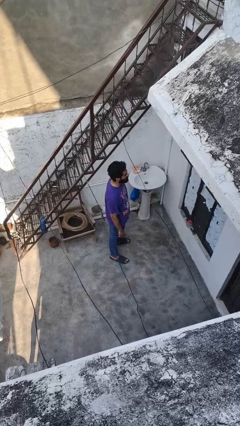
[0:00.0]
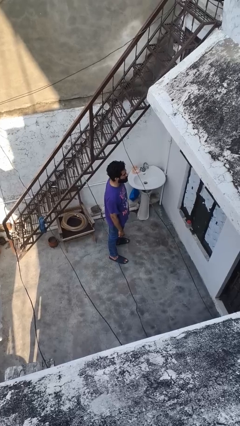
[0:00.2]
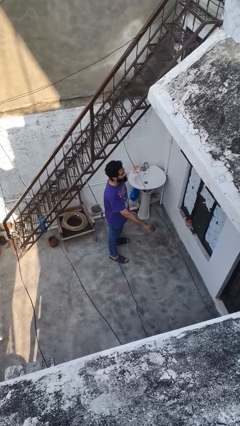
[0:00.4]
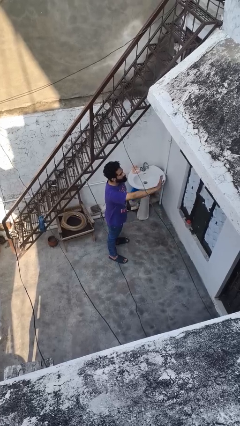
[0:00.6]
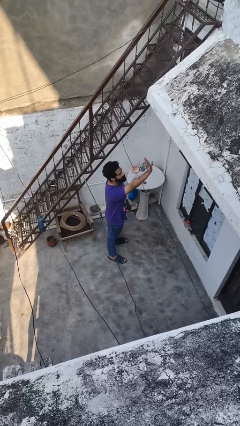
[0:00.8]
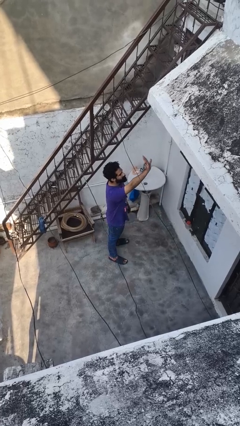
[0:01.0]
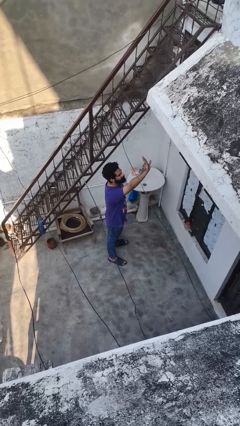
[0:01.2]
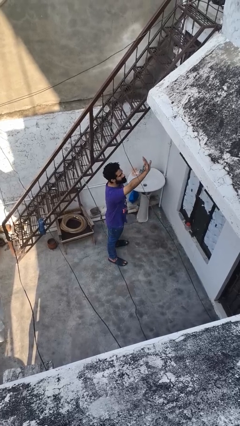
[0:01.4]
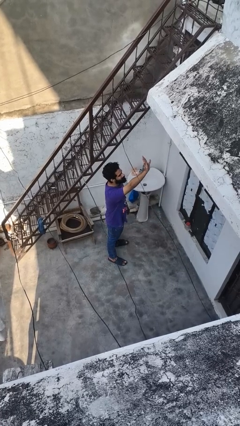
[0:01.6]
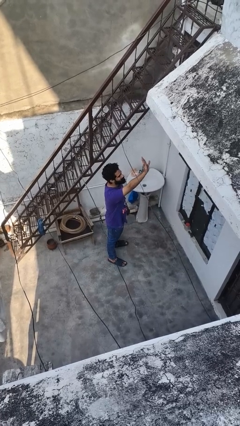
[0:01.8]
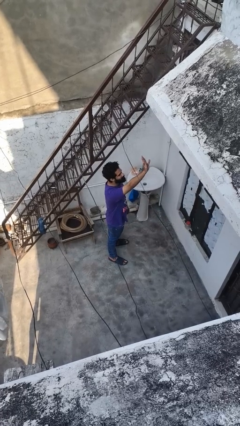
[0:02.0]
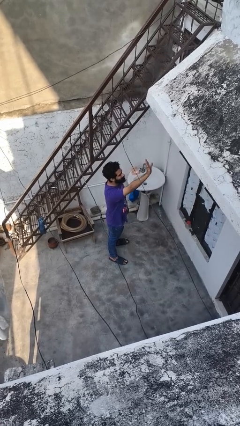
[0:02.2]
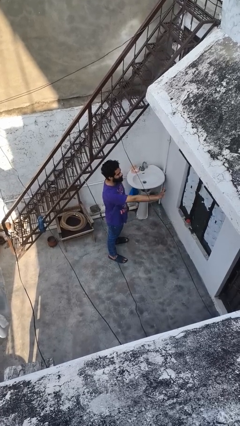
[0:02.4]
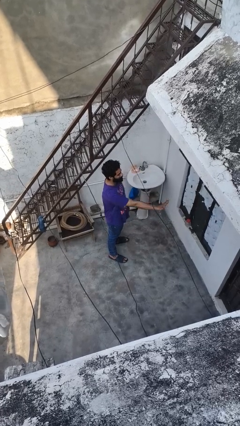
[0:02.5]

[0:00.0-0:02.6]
person gestures raise hand

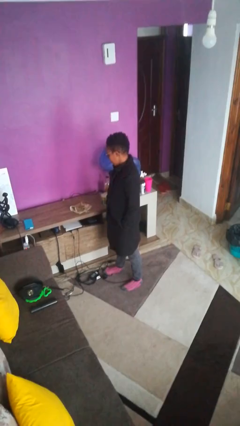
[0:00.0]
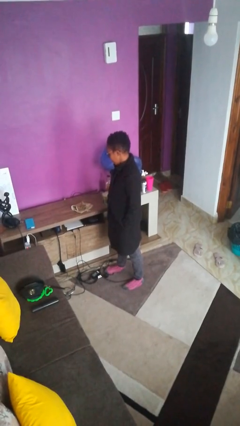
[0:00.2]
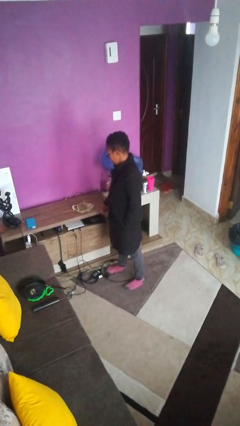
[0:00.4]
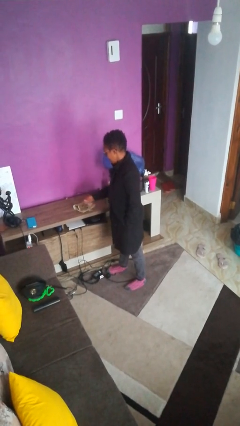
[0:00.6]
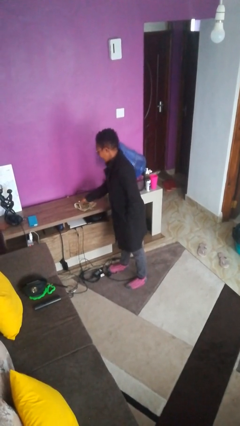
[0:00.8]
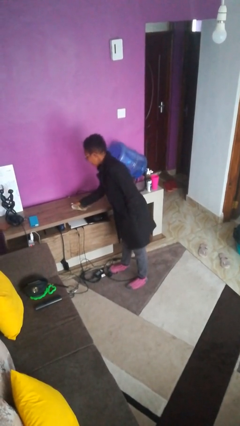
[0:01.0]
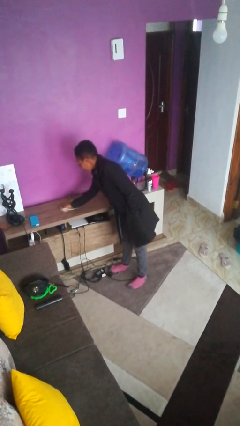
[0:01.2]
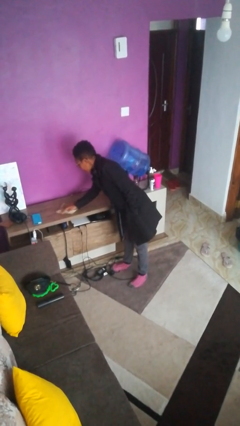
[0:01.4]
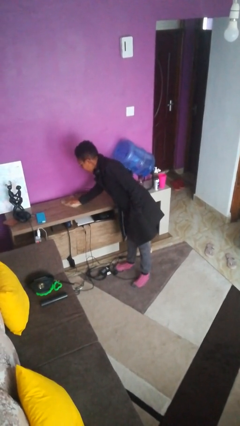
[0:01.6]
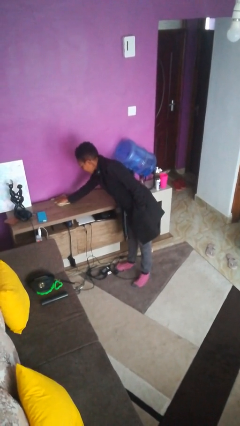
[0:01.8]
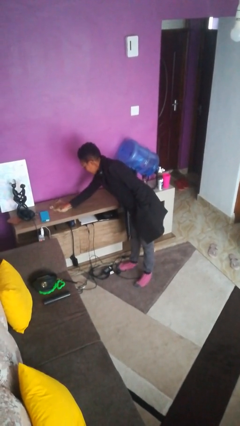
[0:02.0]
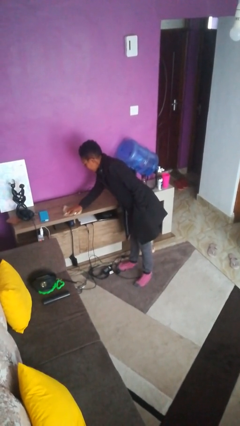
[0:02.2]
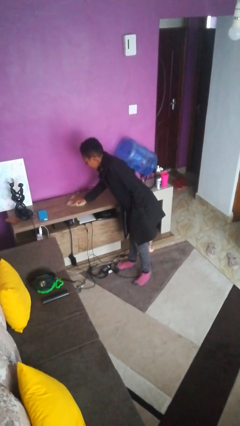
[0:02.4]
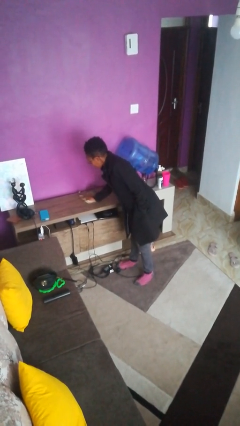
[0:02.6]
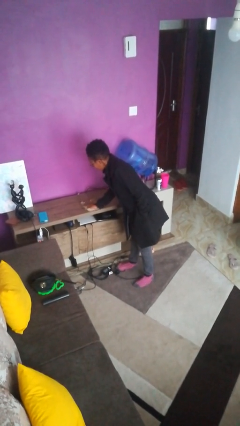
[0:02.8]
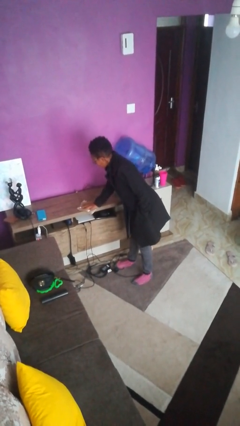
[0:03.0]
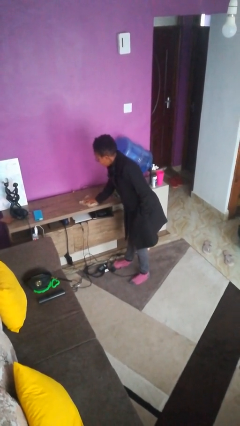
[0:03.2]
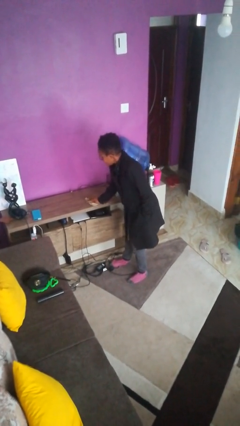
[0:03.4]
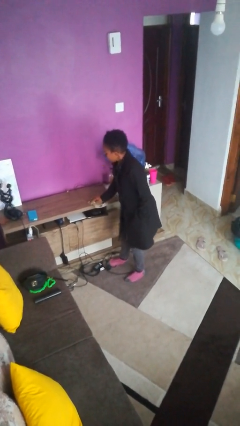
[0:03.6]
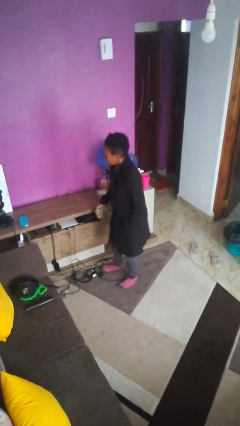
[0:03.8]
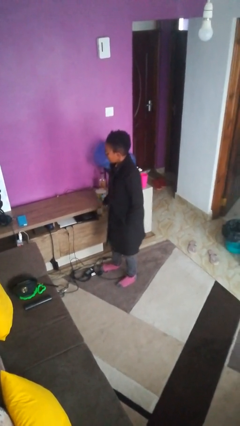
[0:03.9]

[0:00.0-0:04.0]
person cleans table with rag

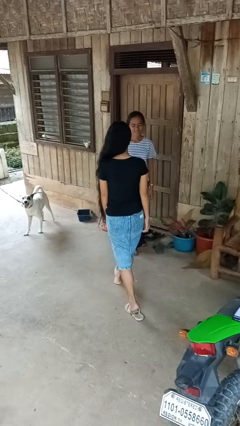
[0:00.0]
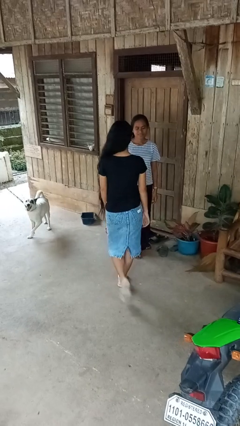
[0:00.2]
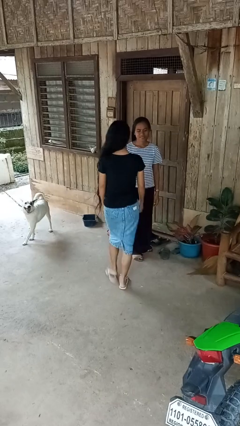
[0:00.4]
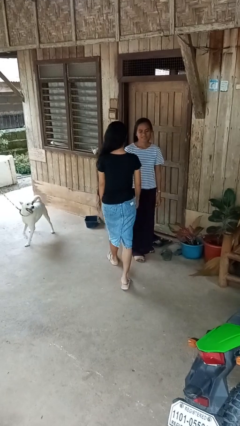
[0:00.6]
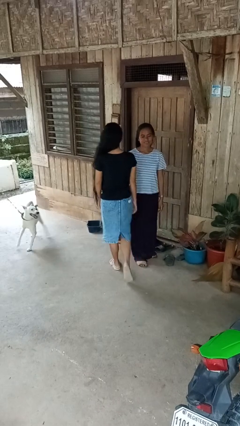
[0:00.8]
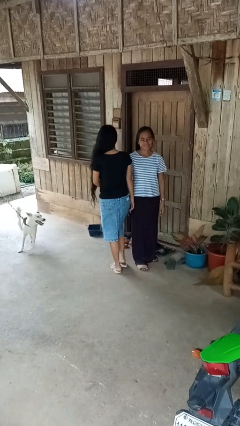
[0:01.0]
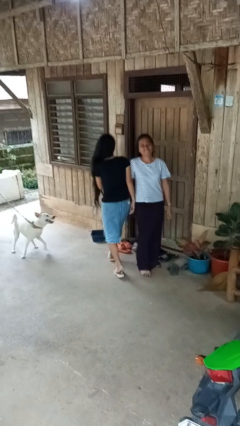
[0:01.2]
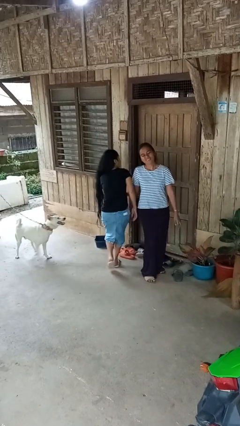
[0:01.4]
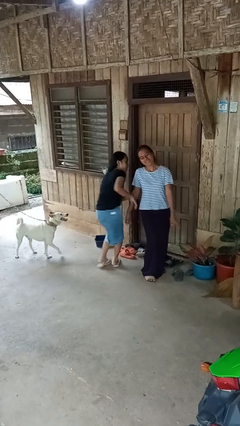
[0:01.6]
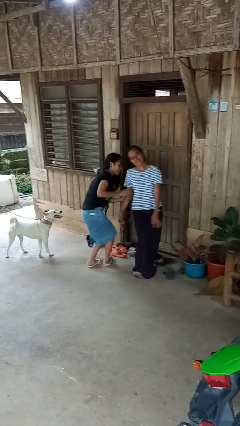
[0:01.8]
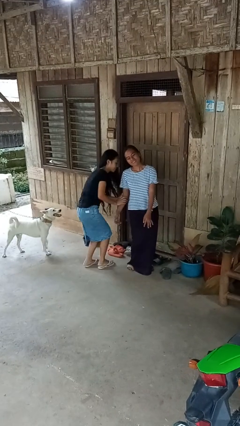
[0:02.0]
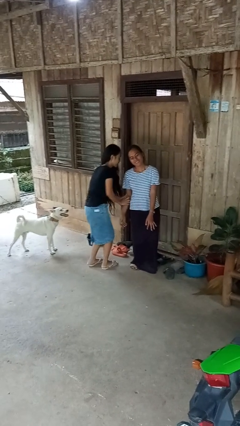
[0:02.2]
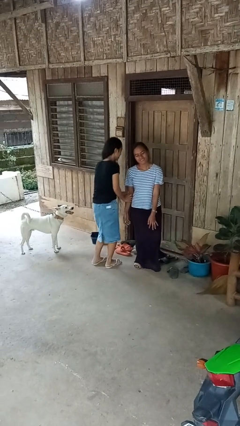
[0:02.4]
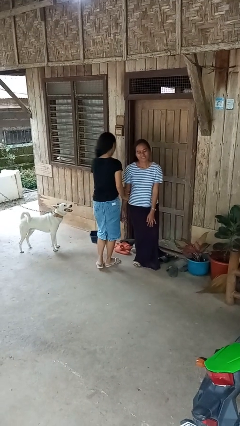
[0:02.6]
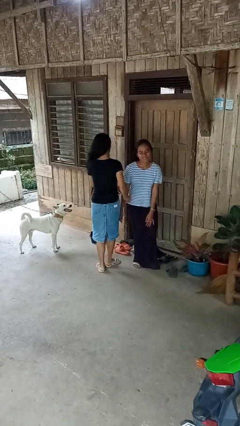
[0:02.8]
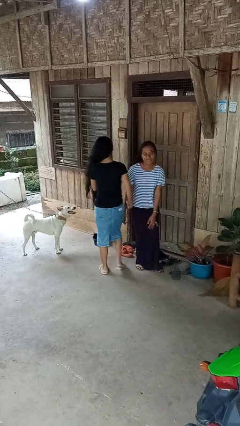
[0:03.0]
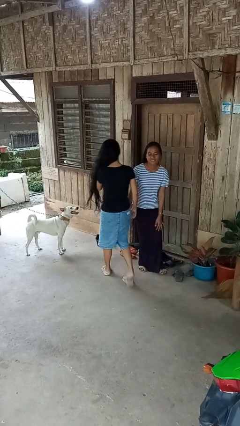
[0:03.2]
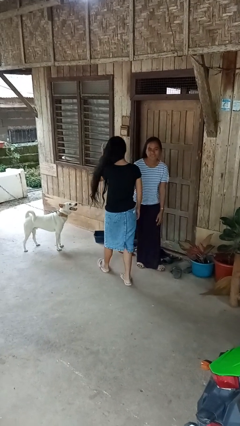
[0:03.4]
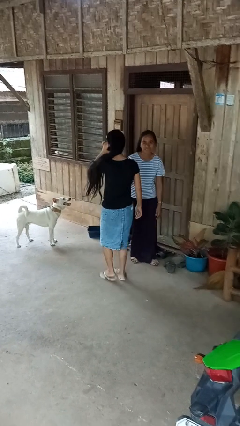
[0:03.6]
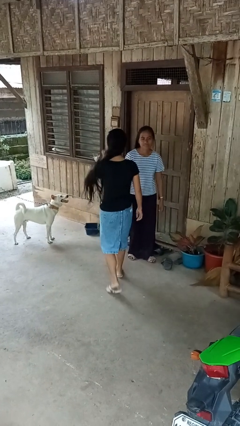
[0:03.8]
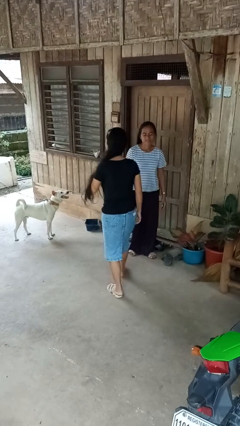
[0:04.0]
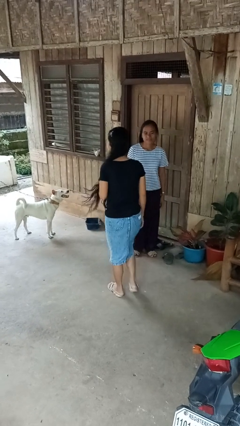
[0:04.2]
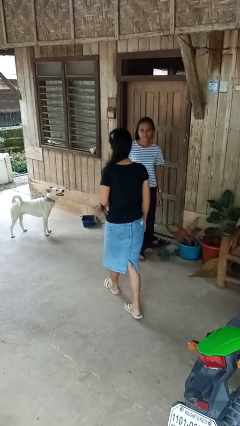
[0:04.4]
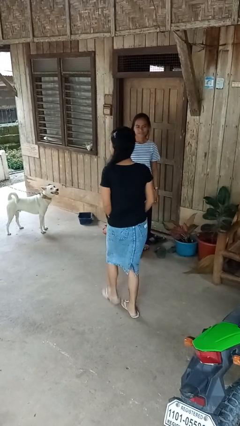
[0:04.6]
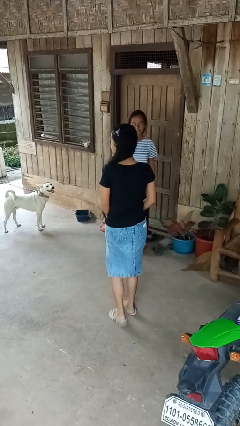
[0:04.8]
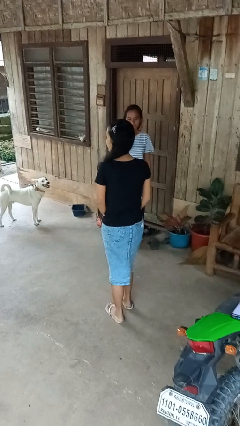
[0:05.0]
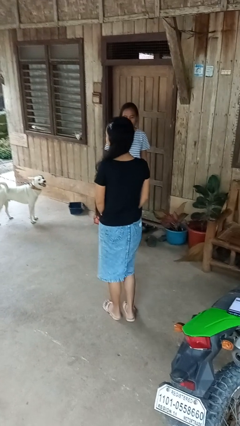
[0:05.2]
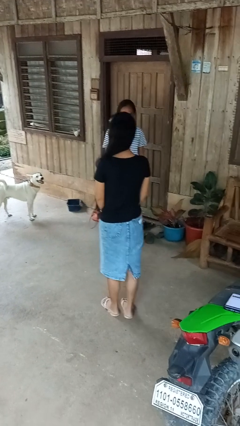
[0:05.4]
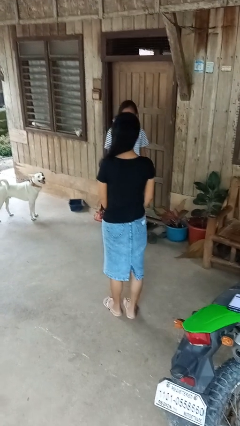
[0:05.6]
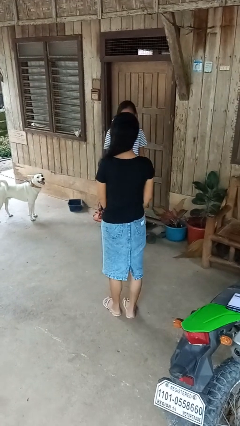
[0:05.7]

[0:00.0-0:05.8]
person bumps into person

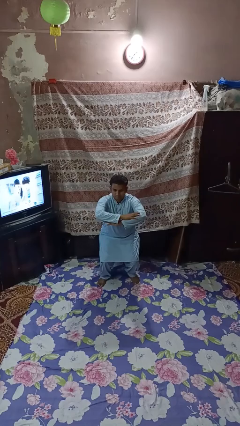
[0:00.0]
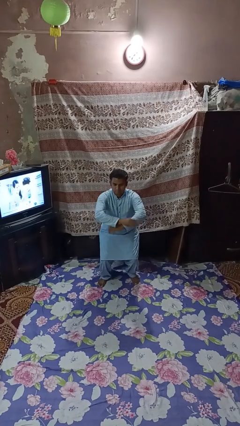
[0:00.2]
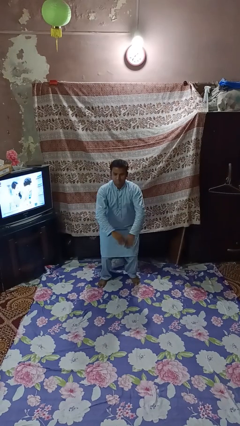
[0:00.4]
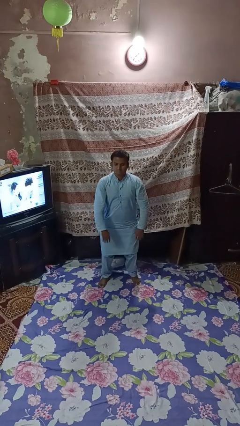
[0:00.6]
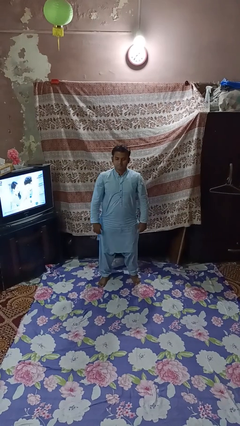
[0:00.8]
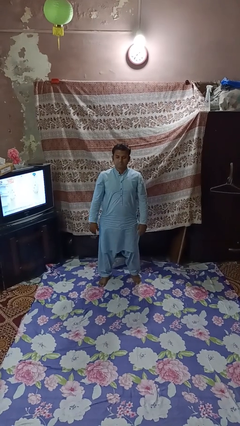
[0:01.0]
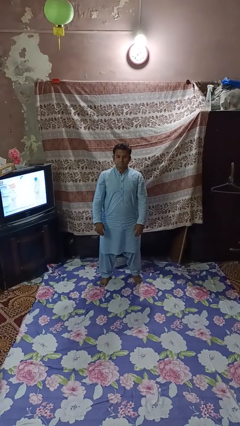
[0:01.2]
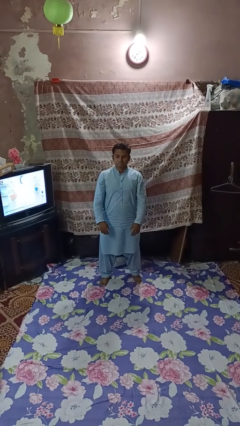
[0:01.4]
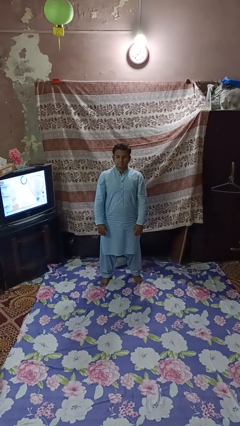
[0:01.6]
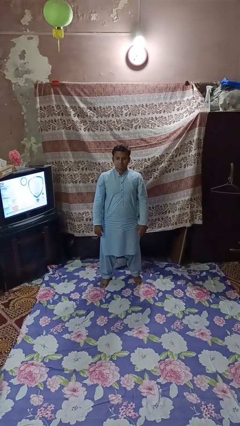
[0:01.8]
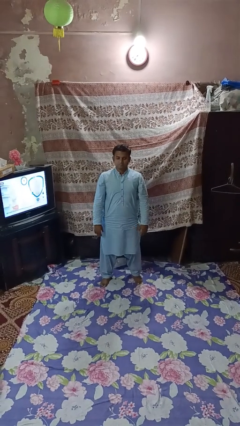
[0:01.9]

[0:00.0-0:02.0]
person stands up

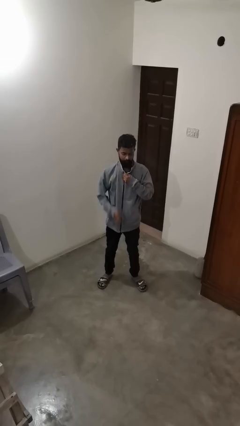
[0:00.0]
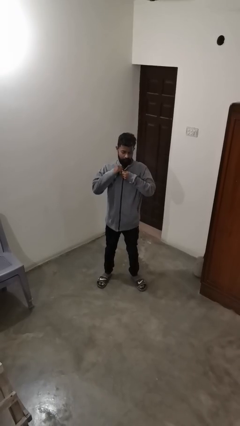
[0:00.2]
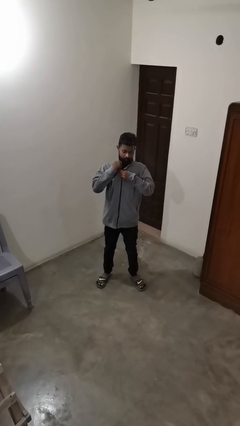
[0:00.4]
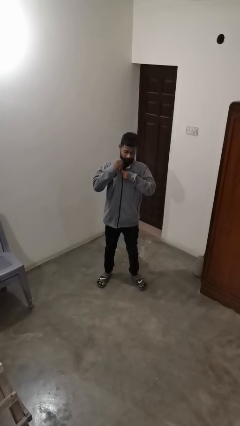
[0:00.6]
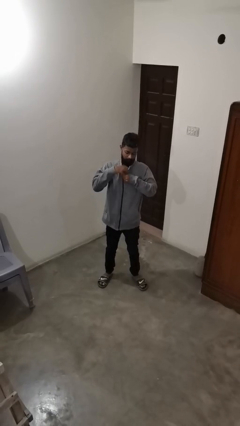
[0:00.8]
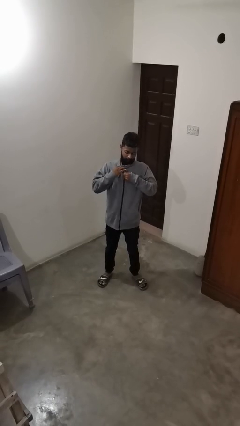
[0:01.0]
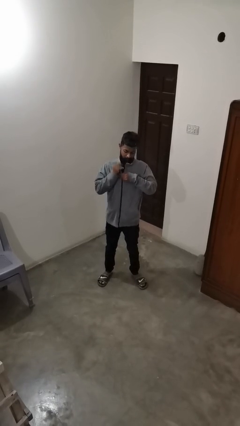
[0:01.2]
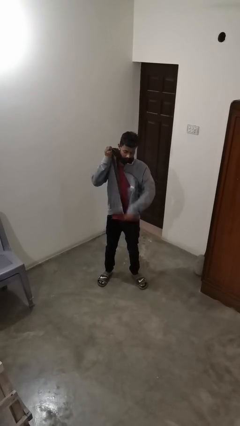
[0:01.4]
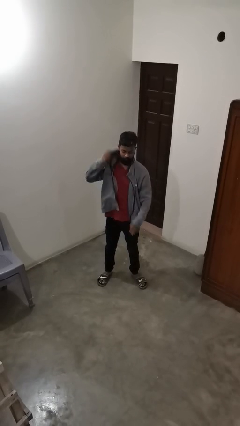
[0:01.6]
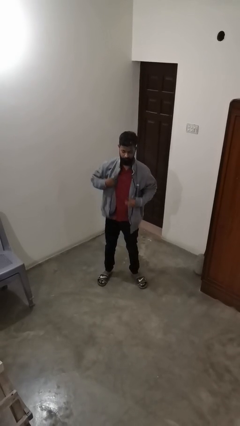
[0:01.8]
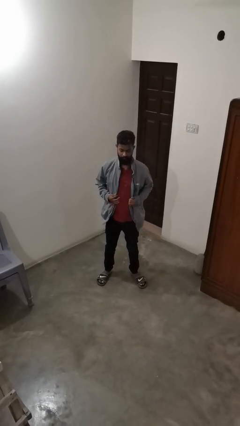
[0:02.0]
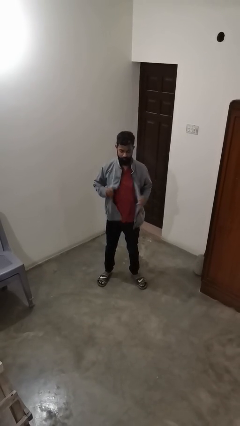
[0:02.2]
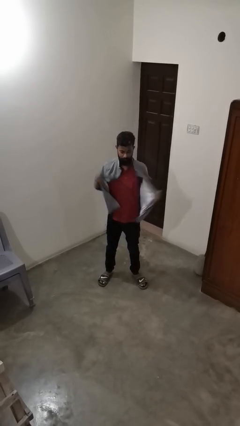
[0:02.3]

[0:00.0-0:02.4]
person unzips jacket

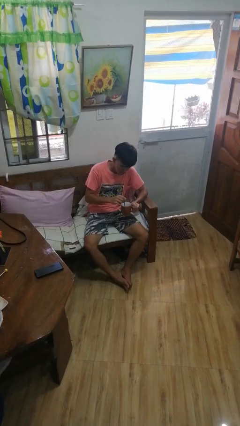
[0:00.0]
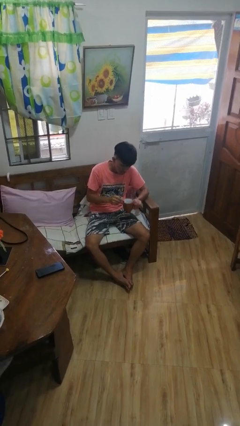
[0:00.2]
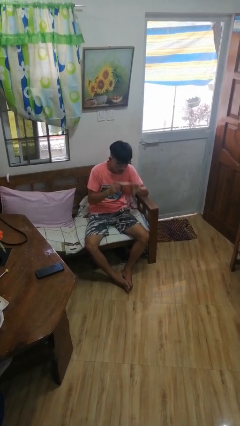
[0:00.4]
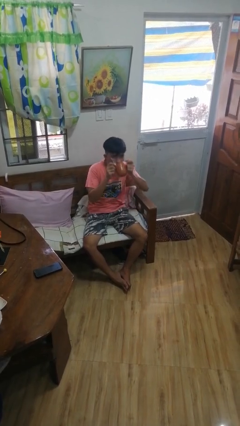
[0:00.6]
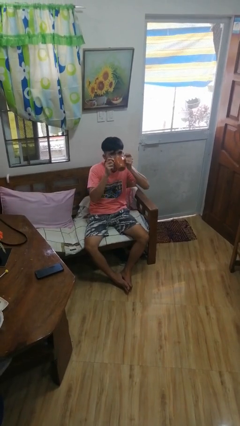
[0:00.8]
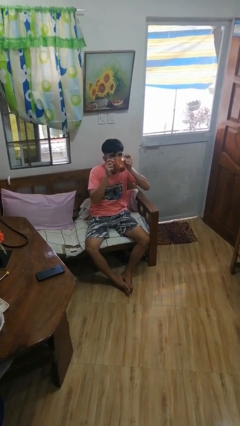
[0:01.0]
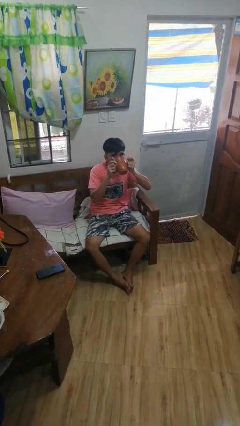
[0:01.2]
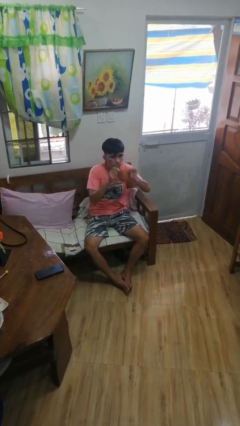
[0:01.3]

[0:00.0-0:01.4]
person drinks from mug
